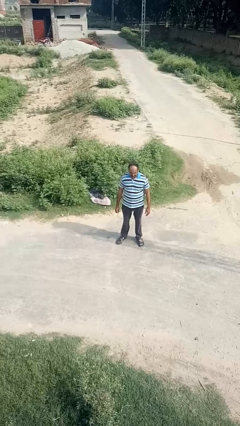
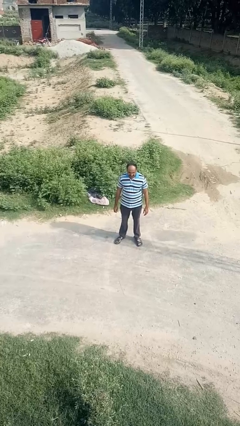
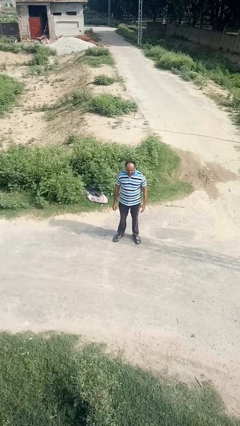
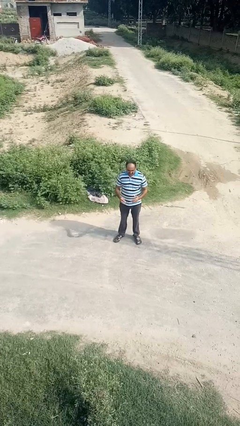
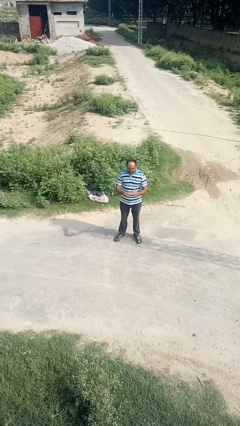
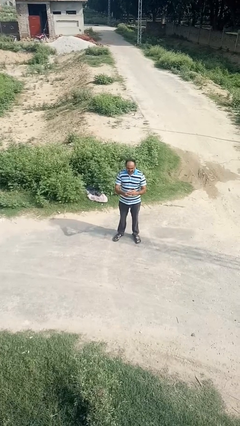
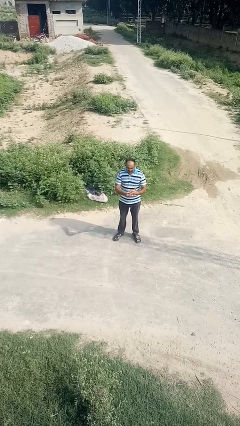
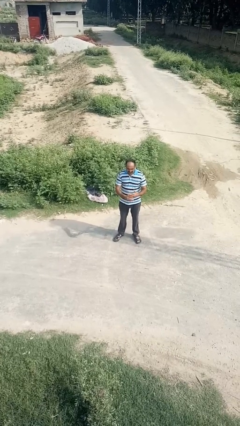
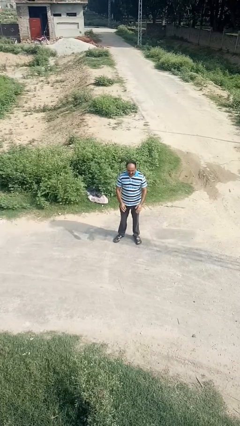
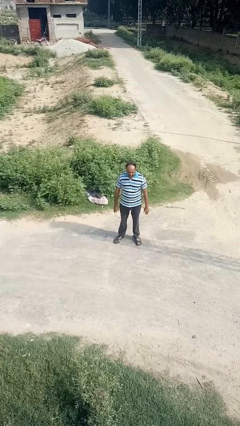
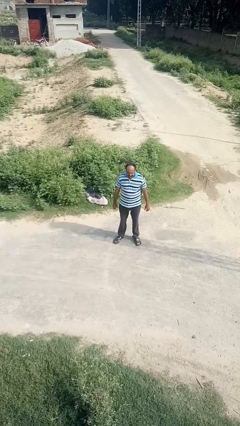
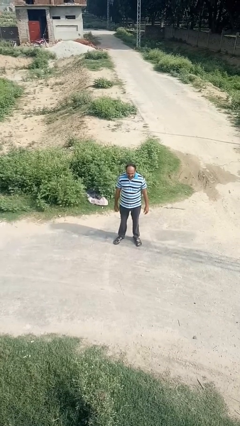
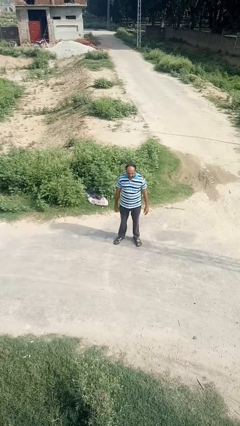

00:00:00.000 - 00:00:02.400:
person puts on ring

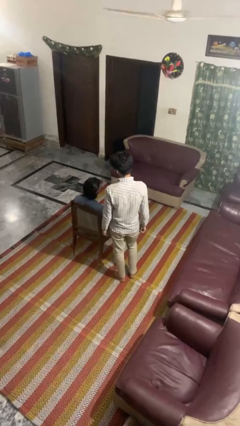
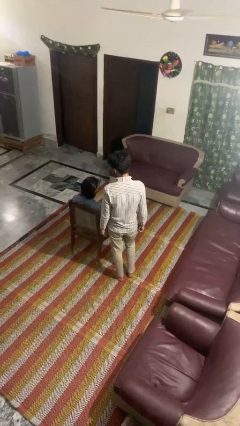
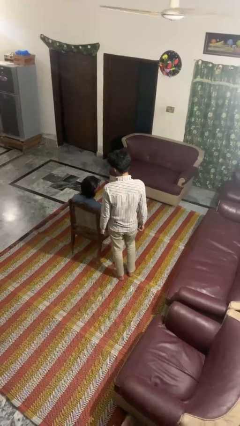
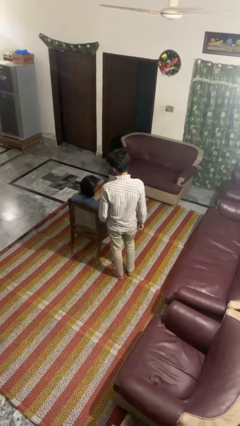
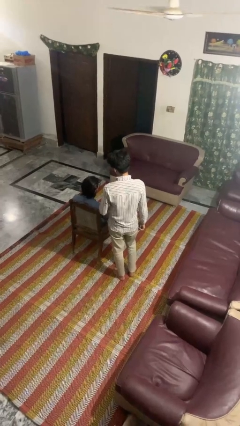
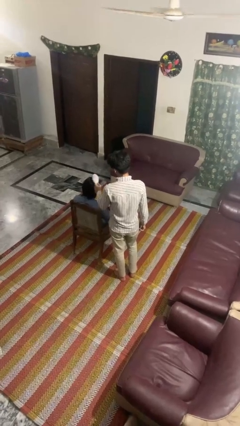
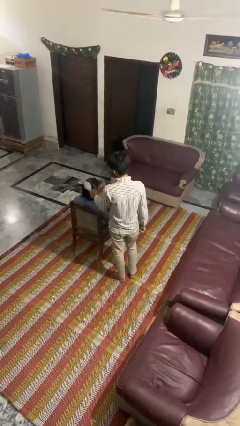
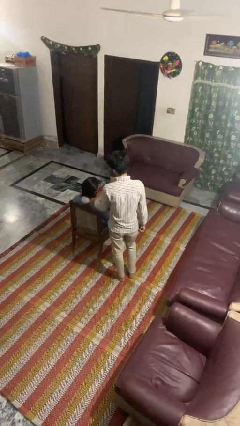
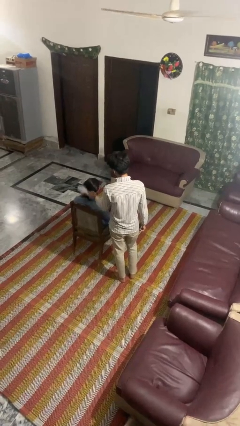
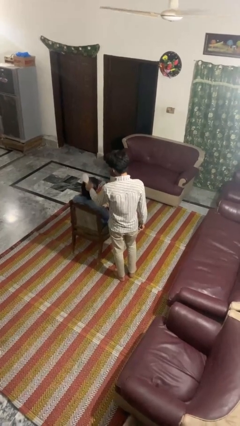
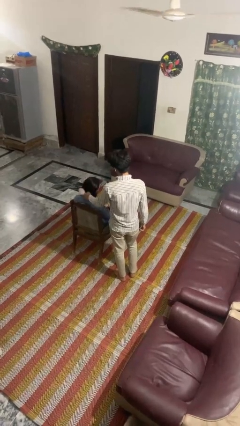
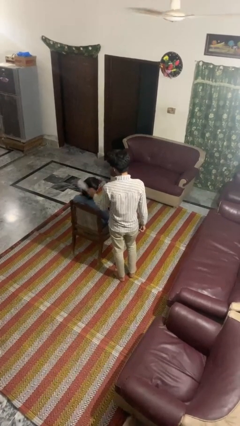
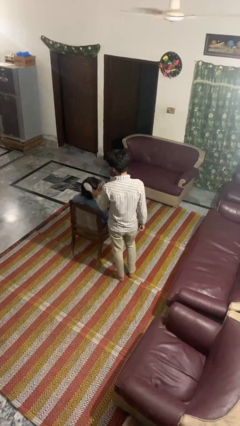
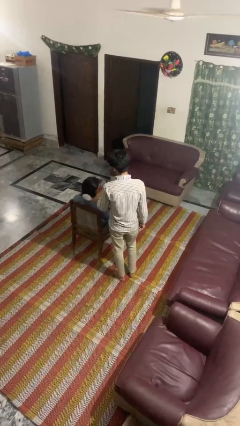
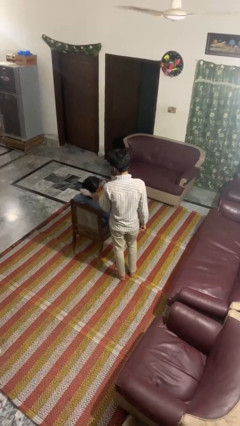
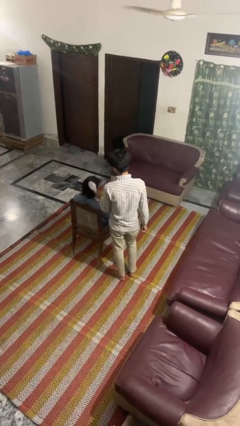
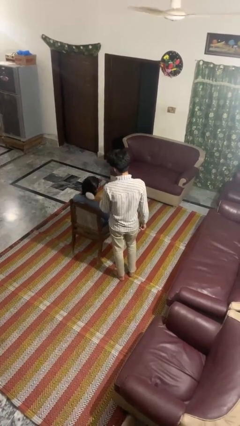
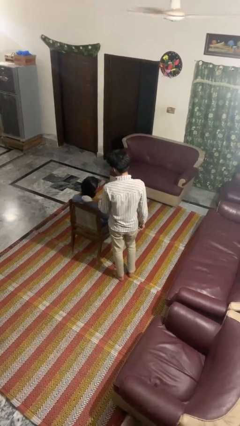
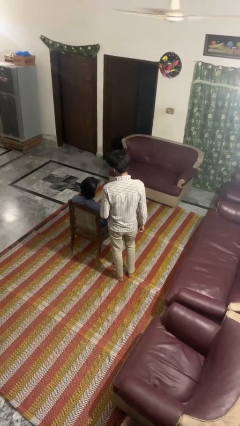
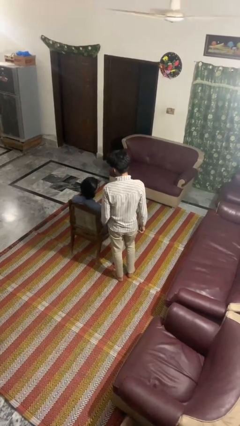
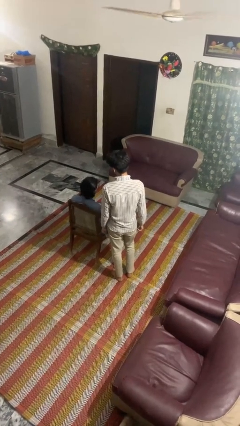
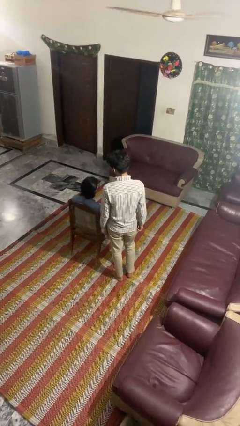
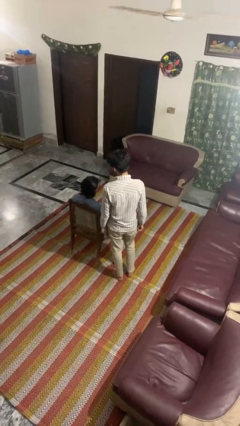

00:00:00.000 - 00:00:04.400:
person brushes hair of person

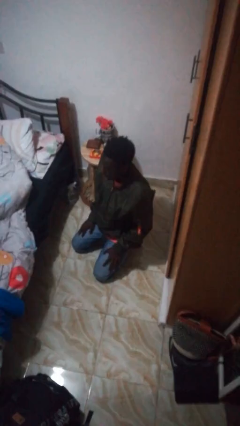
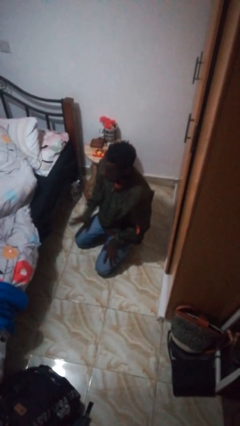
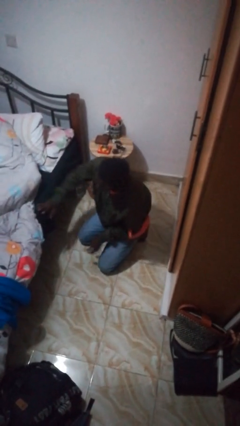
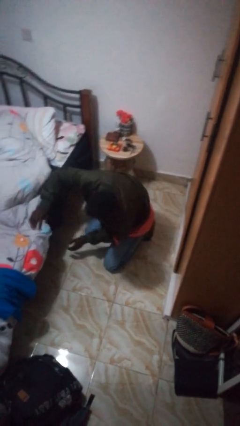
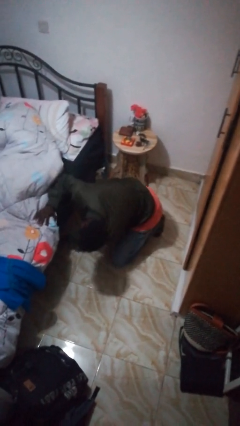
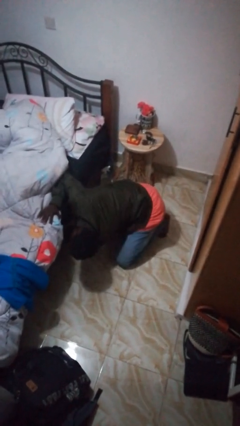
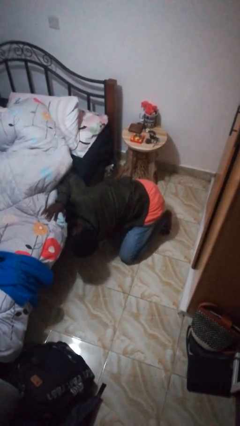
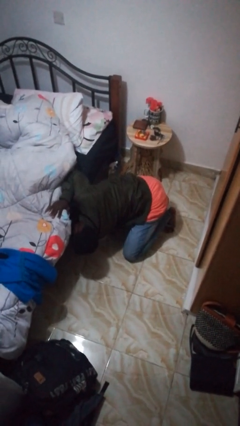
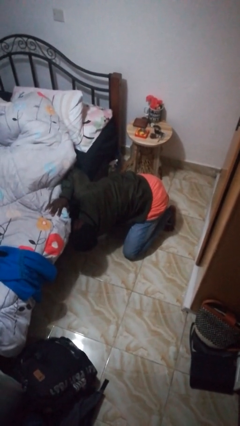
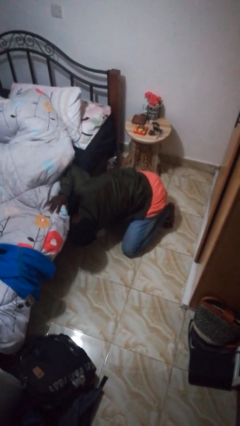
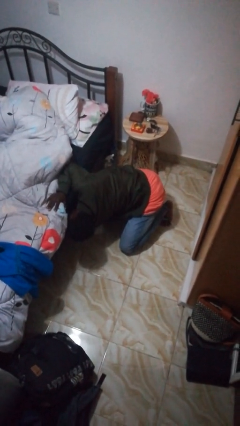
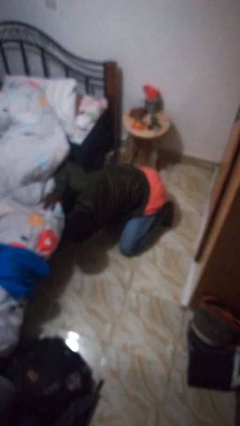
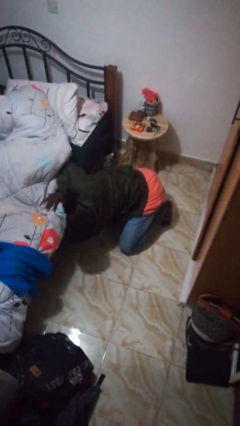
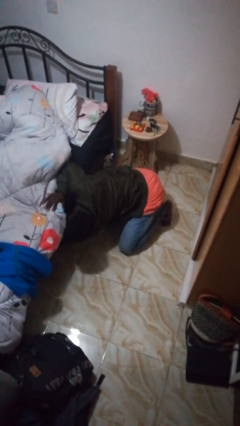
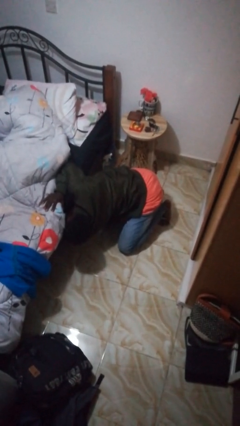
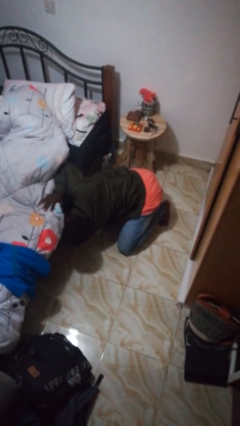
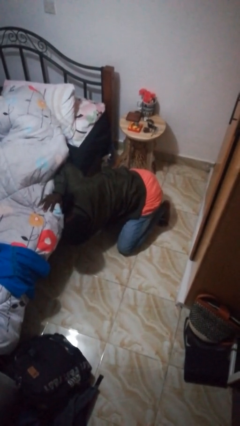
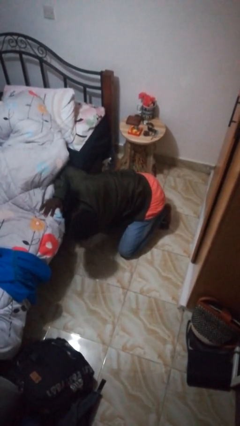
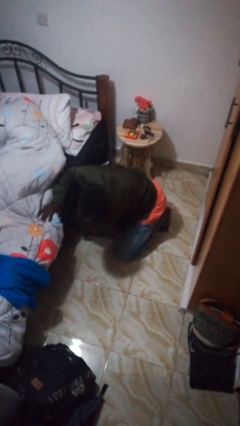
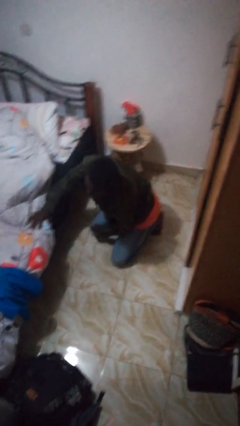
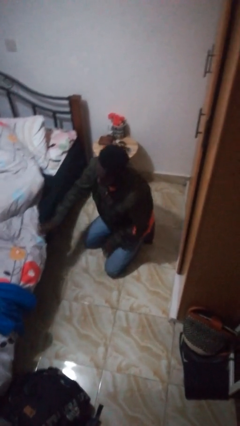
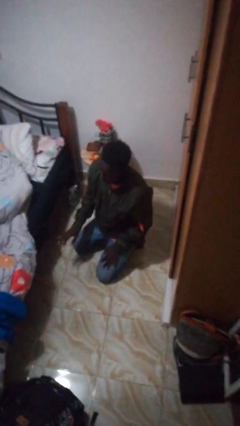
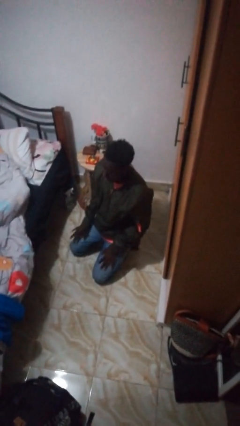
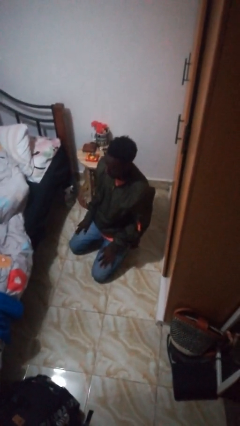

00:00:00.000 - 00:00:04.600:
person searches under bed

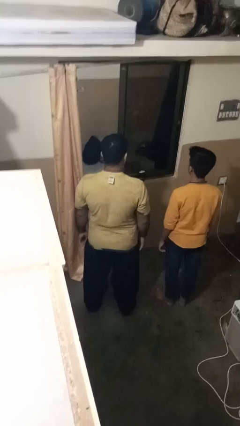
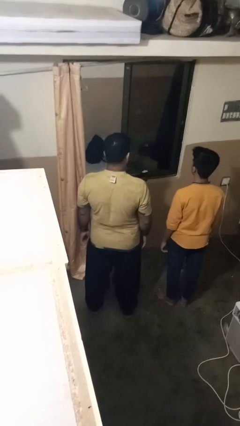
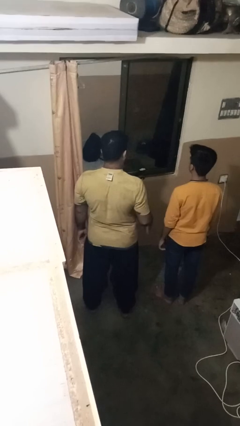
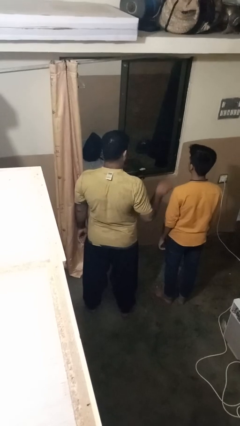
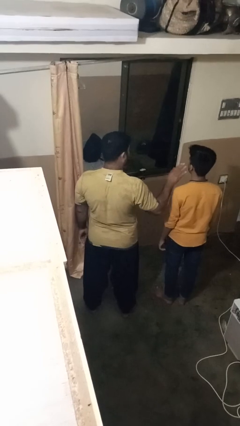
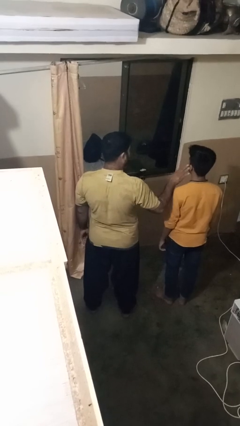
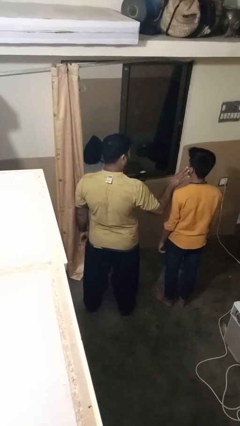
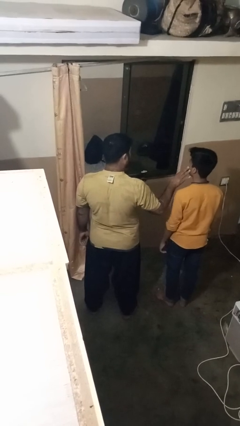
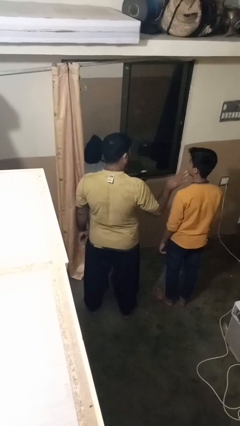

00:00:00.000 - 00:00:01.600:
person touches face of person

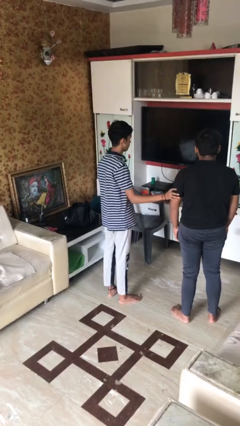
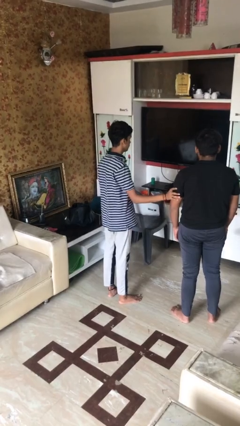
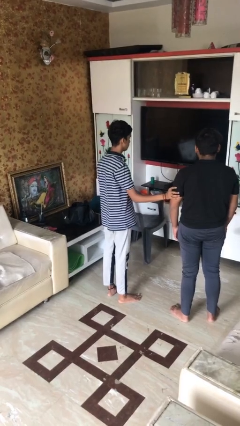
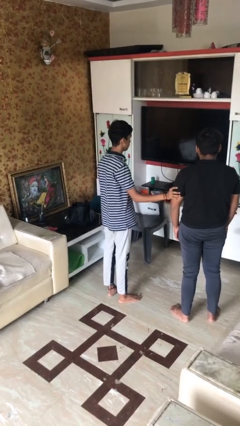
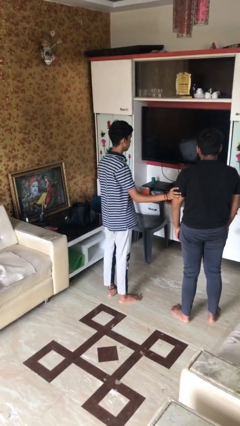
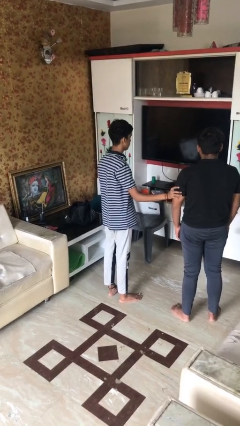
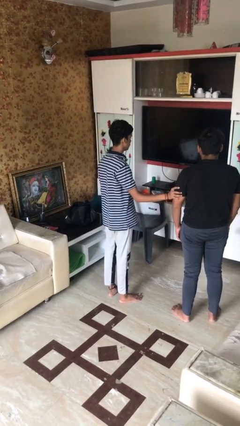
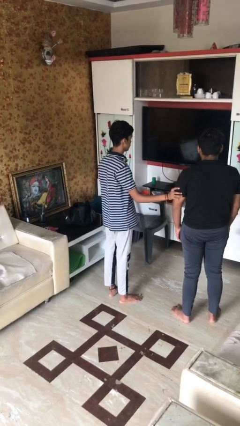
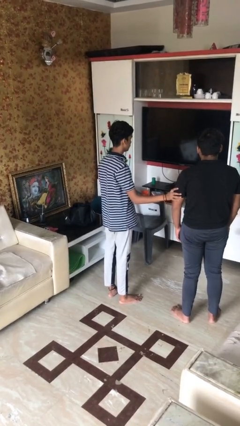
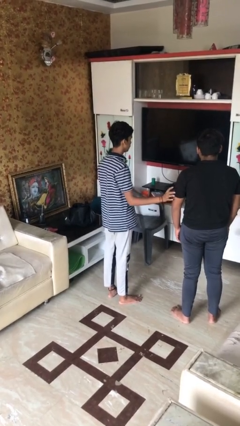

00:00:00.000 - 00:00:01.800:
person grabs person by bicep

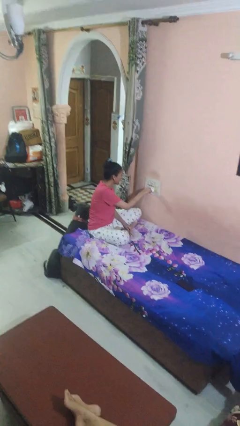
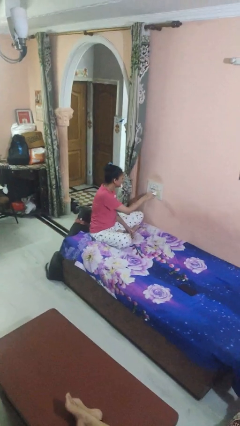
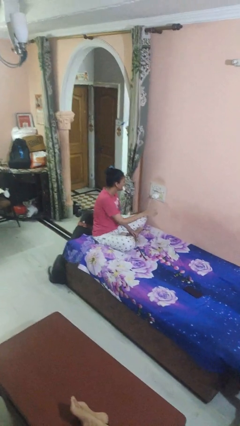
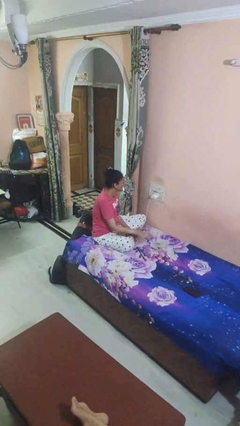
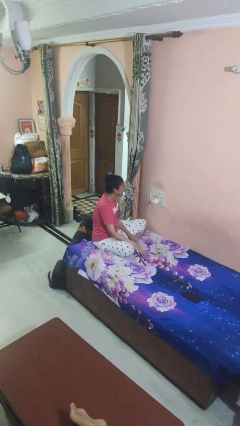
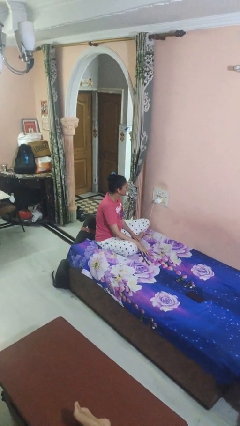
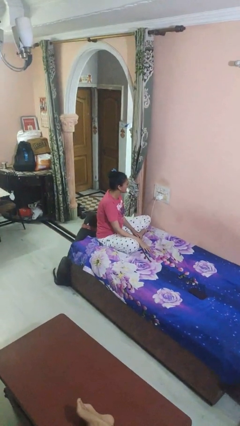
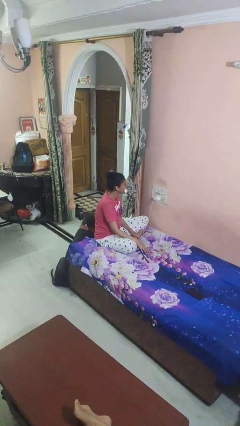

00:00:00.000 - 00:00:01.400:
person plugs into electrical socket

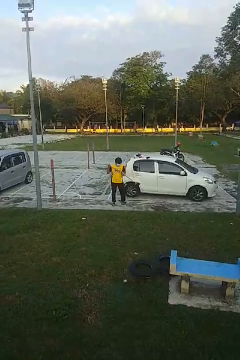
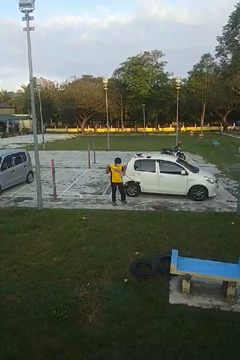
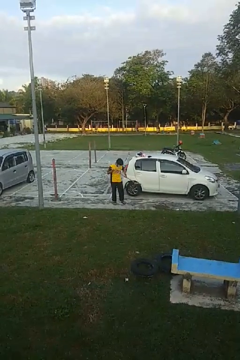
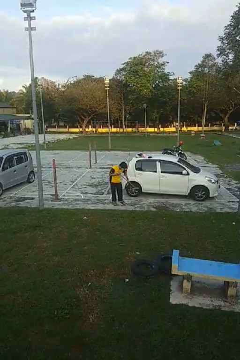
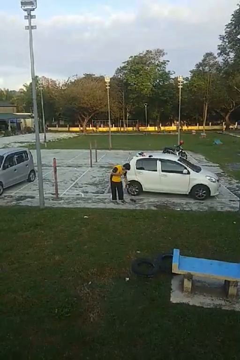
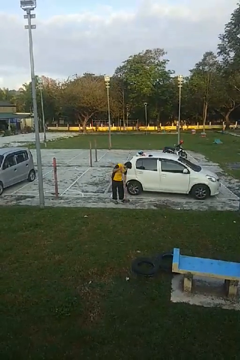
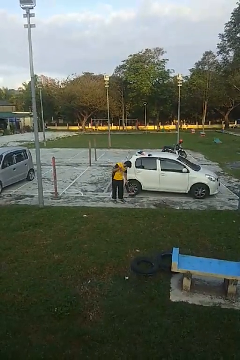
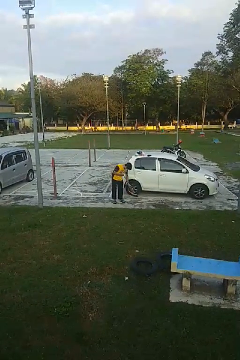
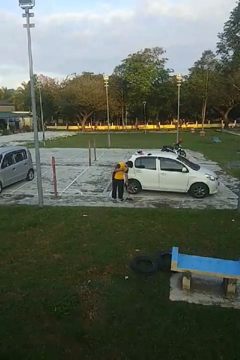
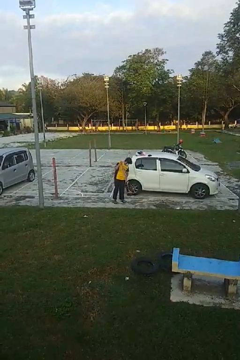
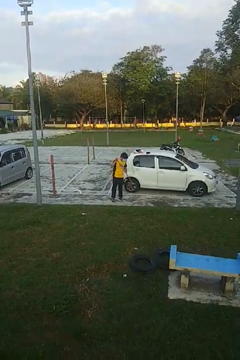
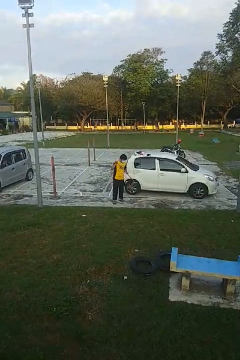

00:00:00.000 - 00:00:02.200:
person sweeps floor
